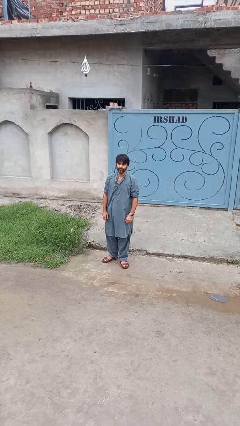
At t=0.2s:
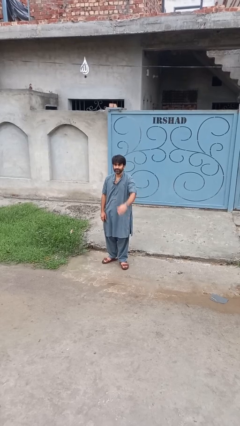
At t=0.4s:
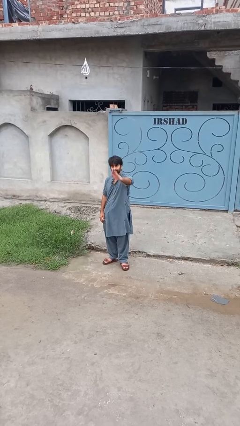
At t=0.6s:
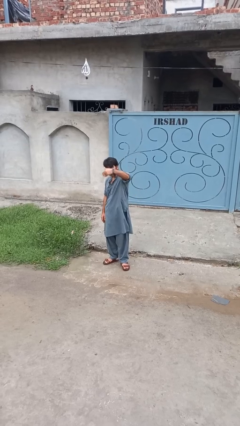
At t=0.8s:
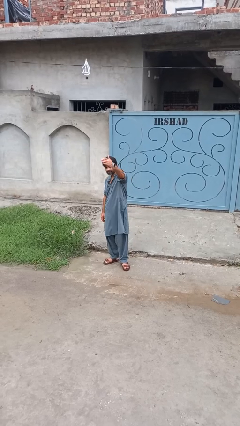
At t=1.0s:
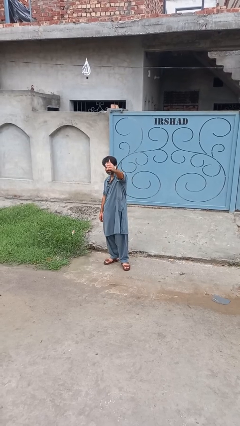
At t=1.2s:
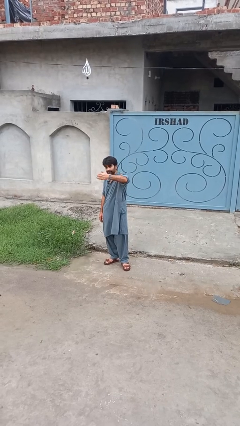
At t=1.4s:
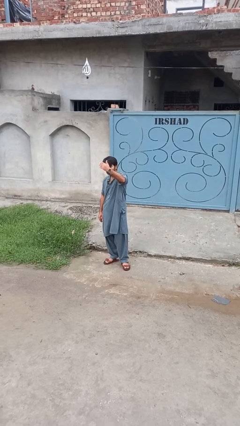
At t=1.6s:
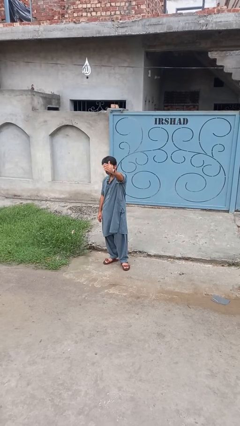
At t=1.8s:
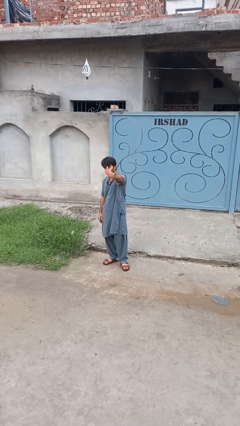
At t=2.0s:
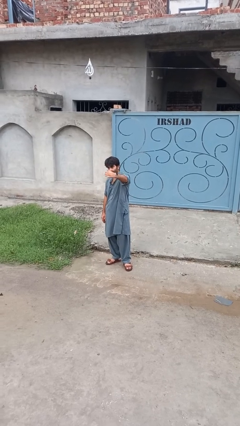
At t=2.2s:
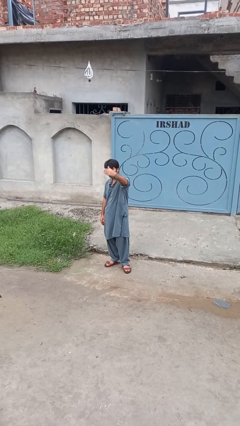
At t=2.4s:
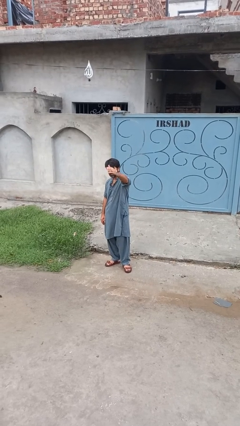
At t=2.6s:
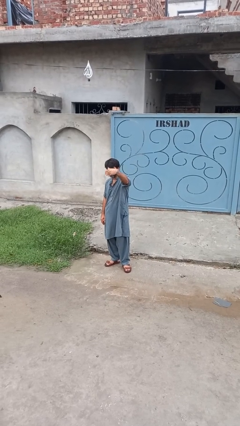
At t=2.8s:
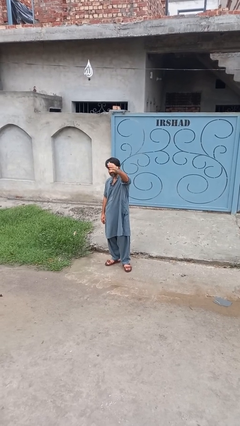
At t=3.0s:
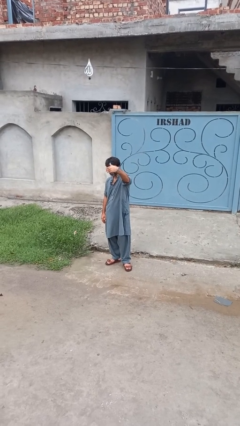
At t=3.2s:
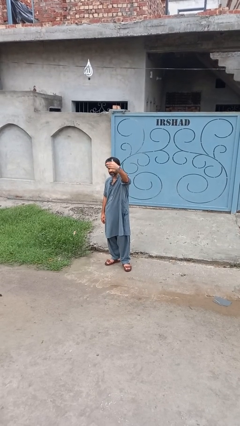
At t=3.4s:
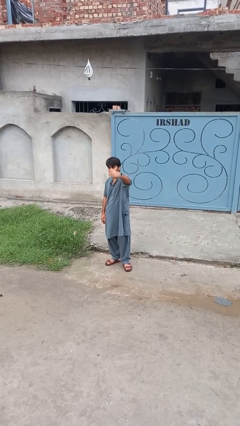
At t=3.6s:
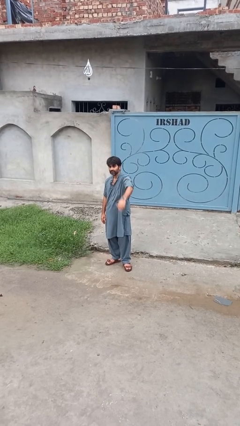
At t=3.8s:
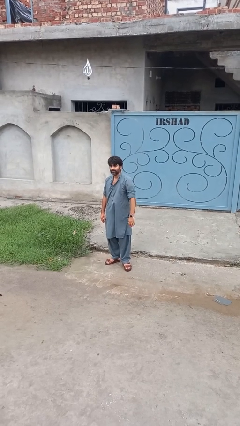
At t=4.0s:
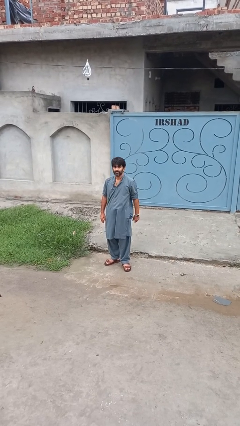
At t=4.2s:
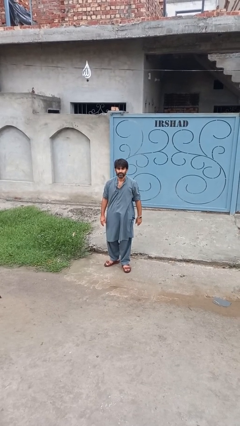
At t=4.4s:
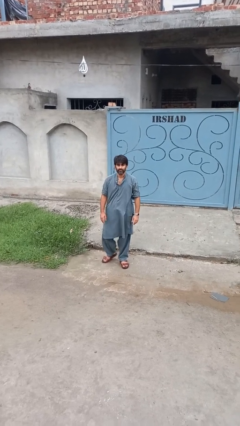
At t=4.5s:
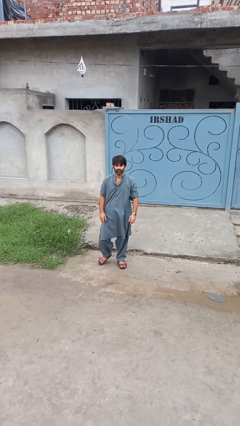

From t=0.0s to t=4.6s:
person gestures come here

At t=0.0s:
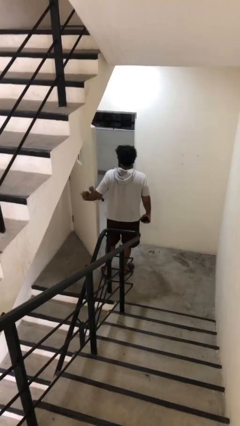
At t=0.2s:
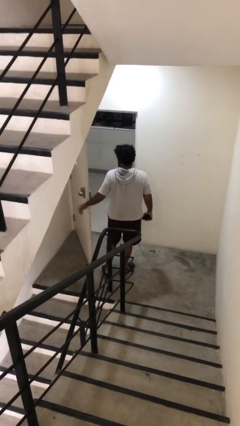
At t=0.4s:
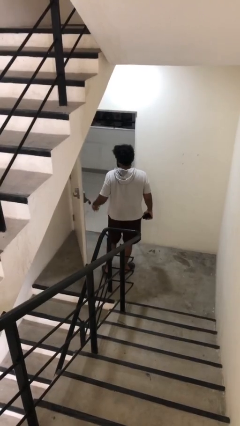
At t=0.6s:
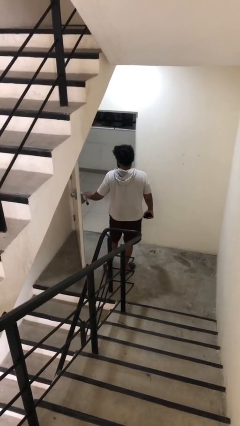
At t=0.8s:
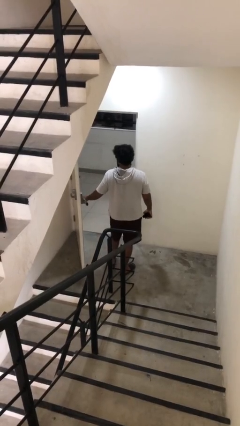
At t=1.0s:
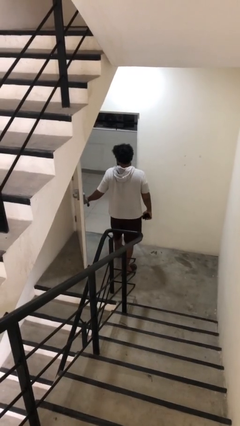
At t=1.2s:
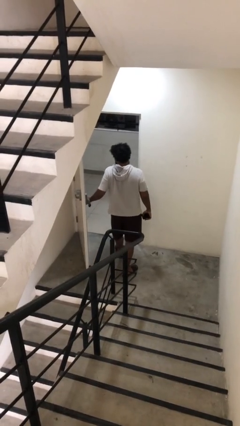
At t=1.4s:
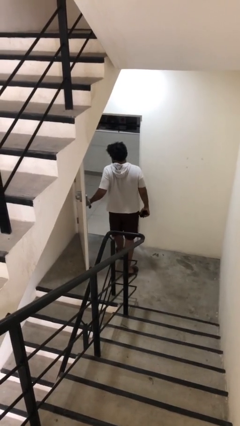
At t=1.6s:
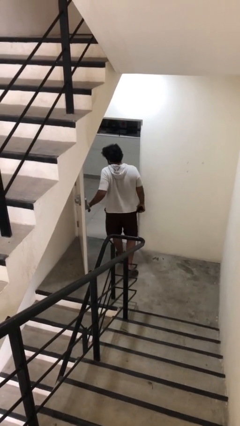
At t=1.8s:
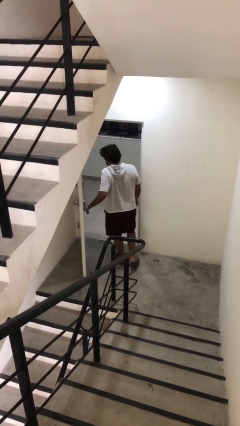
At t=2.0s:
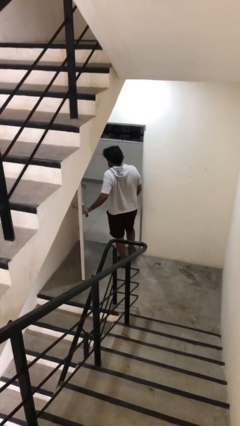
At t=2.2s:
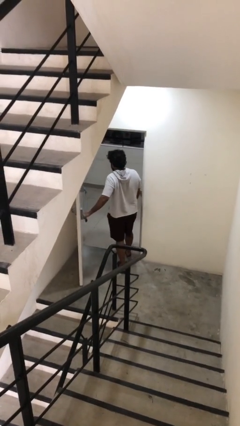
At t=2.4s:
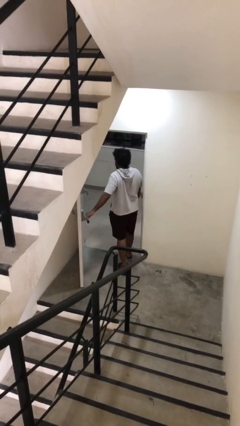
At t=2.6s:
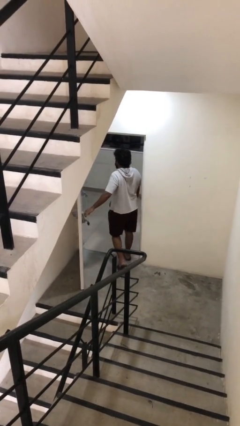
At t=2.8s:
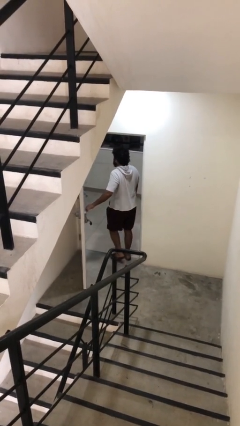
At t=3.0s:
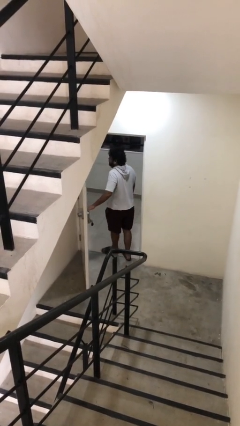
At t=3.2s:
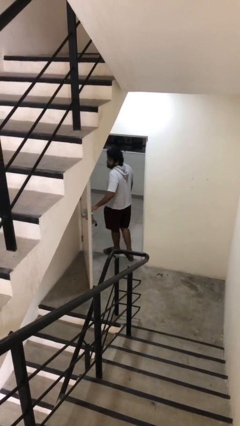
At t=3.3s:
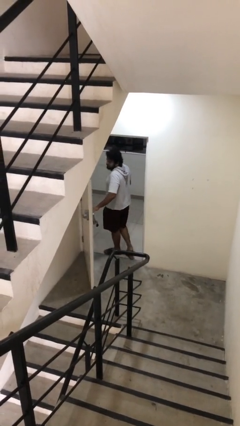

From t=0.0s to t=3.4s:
person exits scene through structure

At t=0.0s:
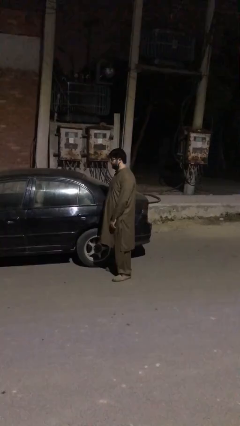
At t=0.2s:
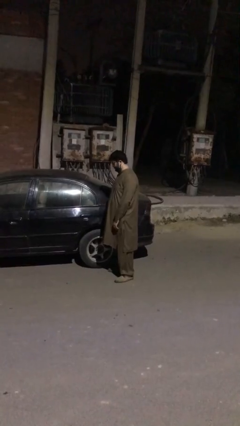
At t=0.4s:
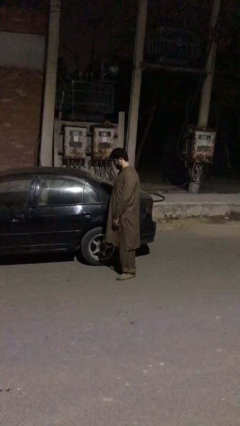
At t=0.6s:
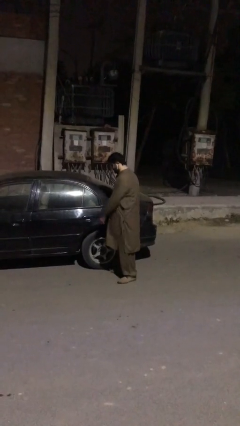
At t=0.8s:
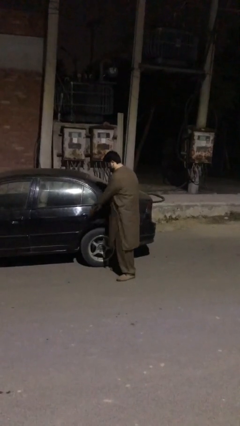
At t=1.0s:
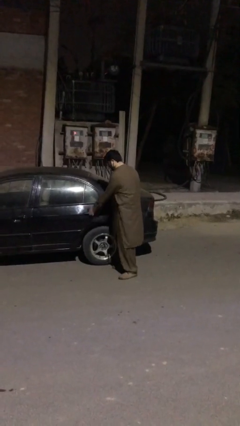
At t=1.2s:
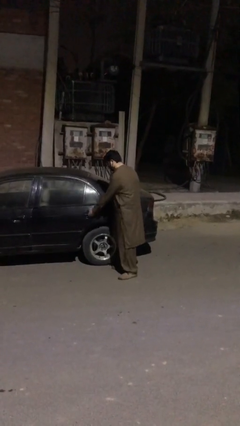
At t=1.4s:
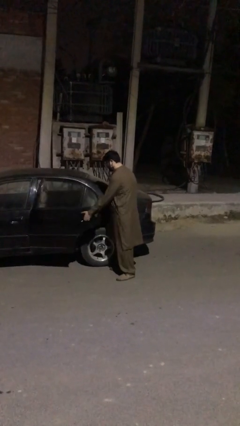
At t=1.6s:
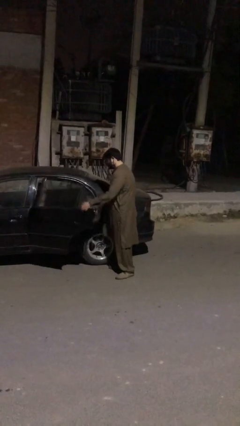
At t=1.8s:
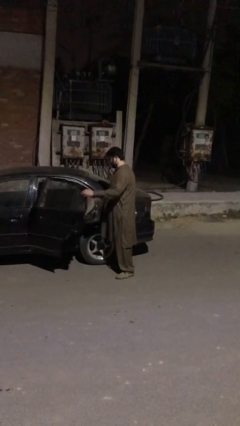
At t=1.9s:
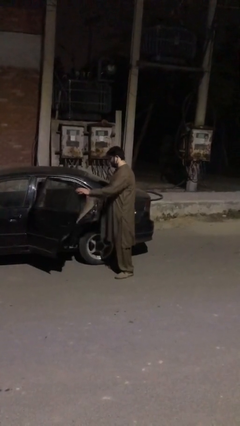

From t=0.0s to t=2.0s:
person opens car door

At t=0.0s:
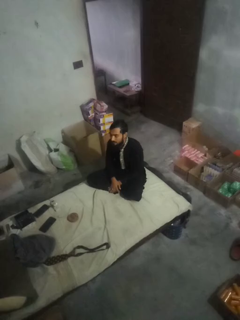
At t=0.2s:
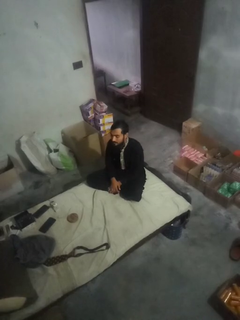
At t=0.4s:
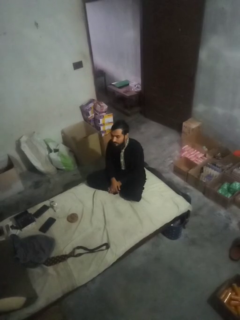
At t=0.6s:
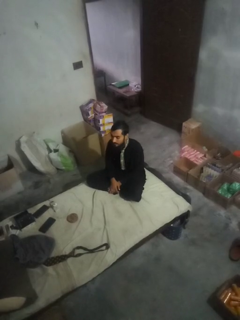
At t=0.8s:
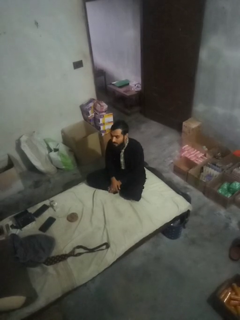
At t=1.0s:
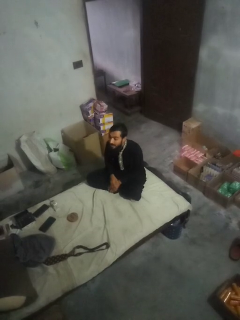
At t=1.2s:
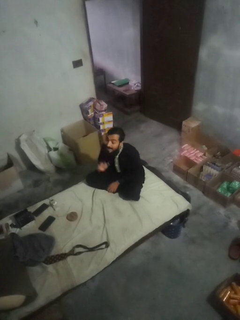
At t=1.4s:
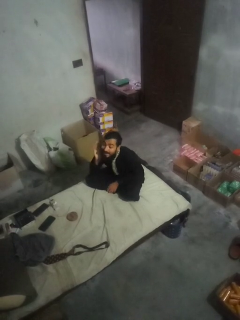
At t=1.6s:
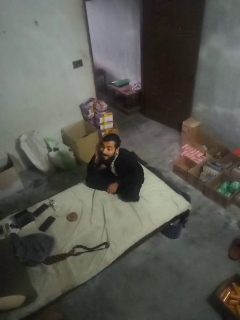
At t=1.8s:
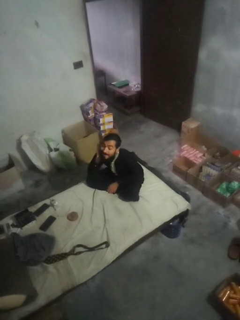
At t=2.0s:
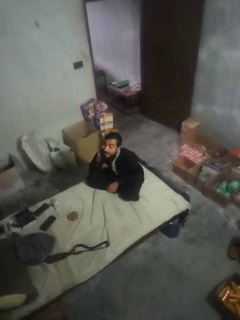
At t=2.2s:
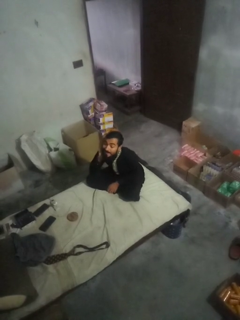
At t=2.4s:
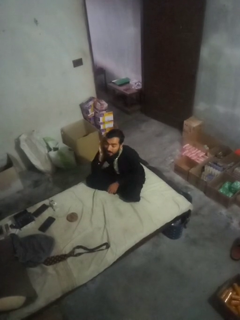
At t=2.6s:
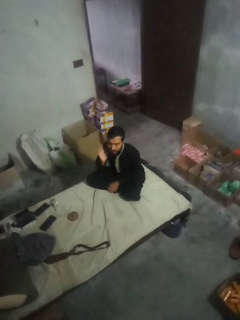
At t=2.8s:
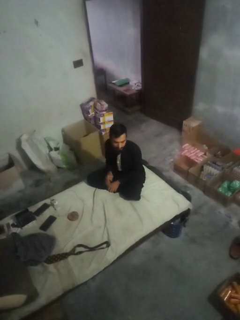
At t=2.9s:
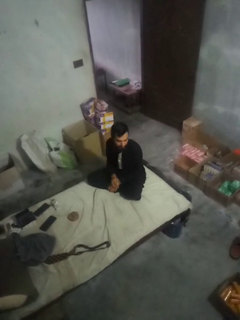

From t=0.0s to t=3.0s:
person gestures listen closely

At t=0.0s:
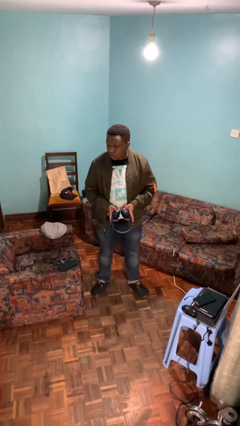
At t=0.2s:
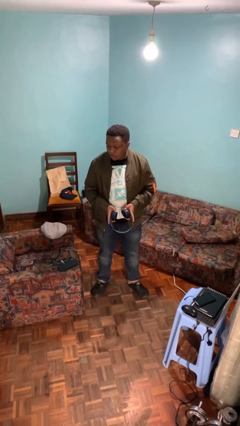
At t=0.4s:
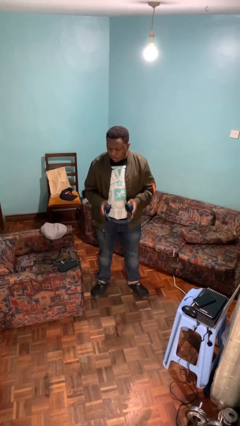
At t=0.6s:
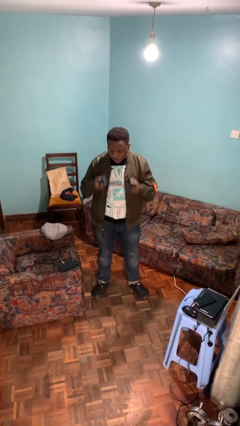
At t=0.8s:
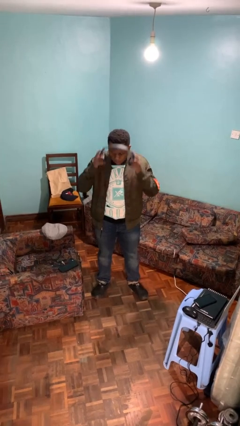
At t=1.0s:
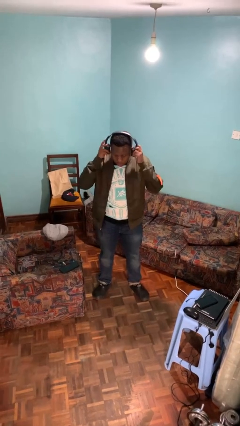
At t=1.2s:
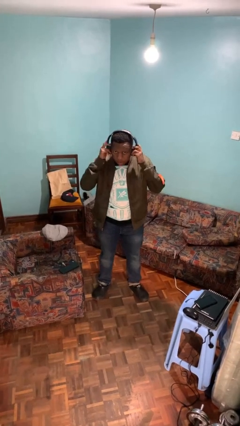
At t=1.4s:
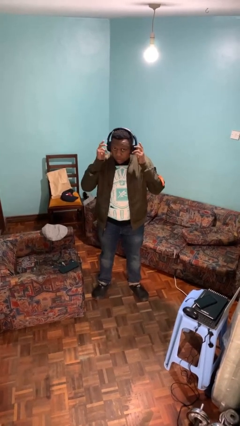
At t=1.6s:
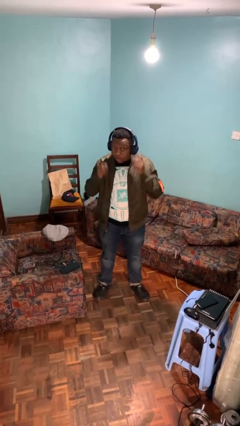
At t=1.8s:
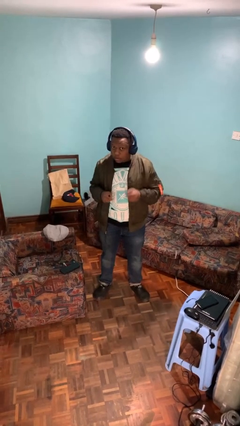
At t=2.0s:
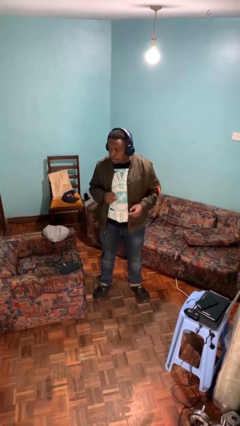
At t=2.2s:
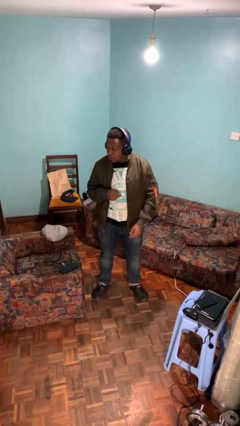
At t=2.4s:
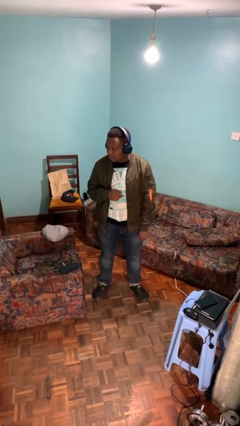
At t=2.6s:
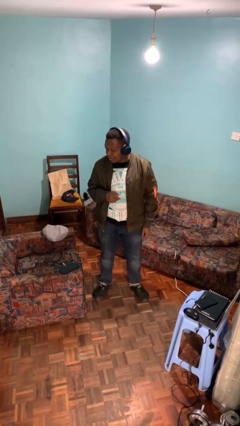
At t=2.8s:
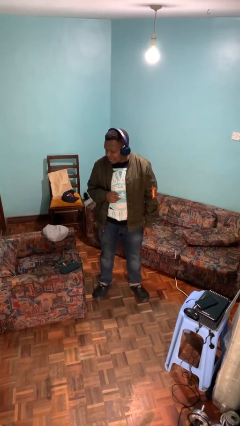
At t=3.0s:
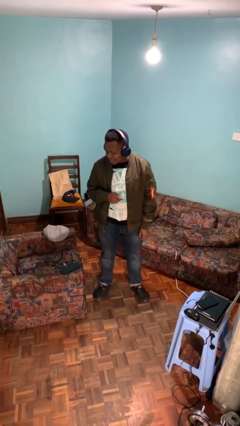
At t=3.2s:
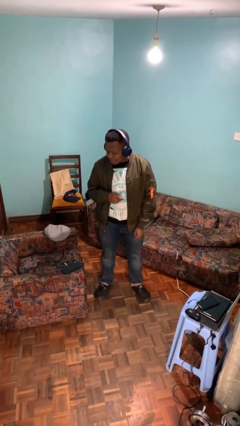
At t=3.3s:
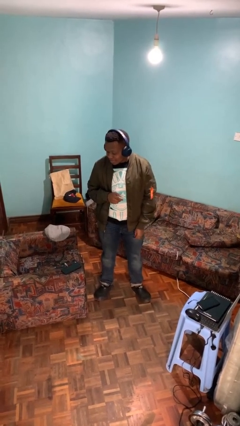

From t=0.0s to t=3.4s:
person puts on headphones

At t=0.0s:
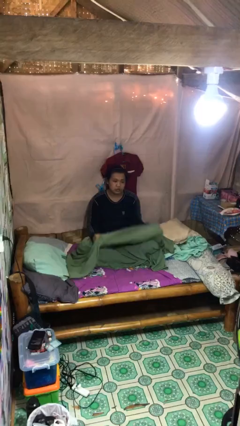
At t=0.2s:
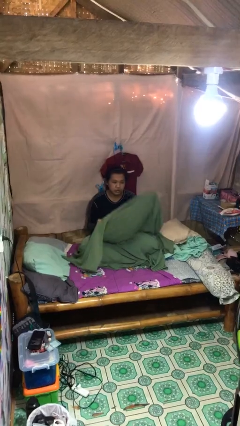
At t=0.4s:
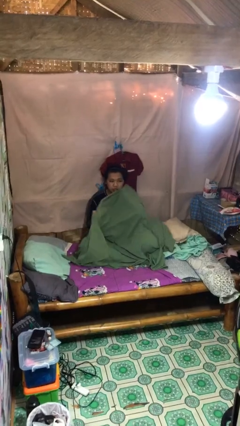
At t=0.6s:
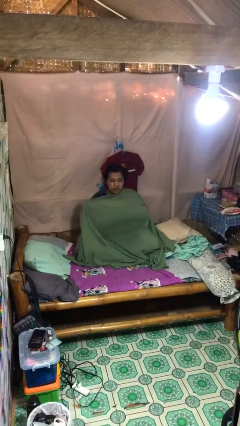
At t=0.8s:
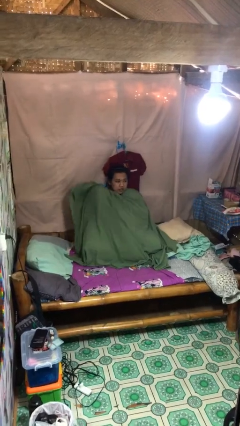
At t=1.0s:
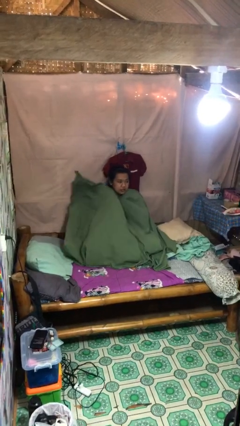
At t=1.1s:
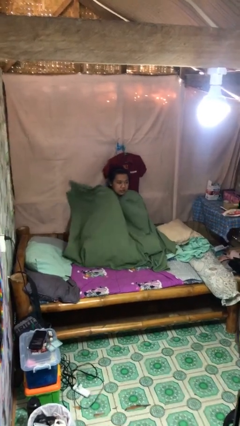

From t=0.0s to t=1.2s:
person covers with blanket

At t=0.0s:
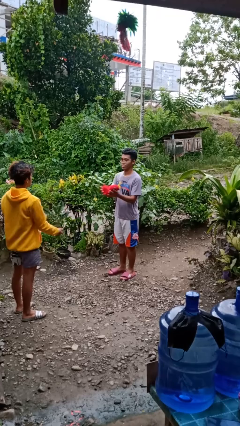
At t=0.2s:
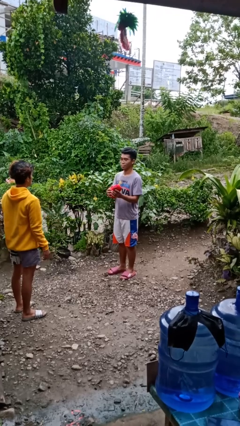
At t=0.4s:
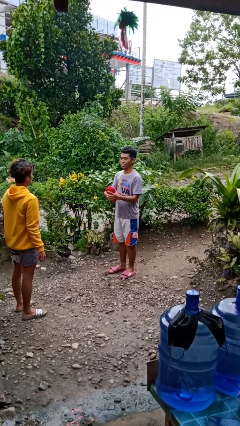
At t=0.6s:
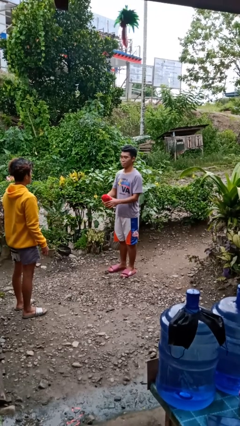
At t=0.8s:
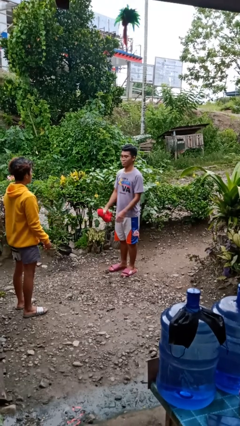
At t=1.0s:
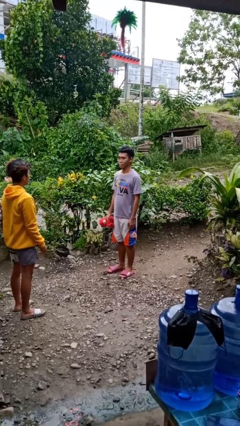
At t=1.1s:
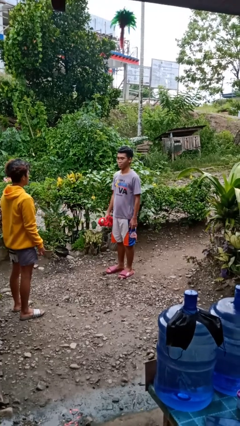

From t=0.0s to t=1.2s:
person catches object from person
